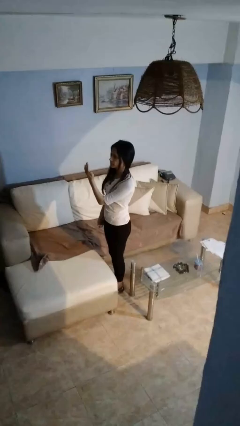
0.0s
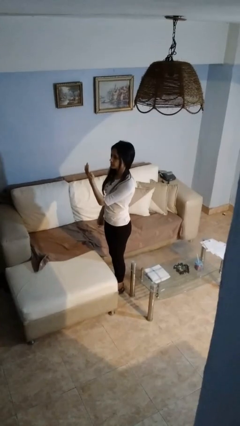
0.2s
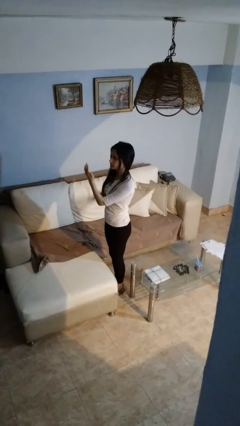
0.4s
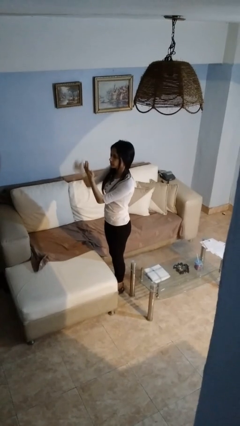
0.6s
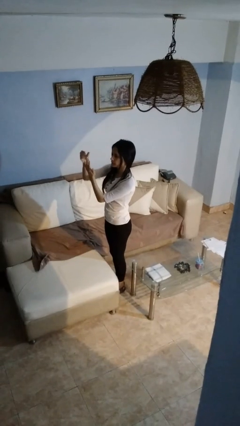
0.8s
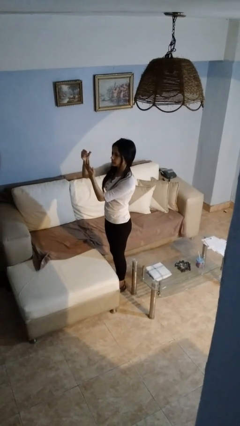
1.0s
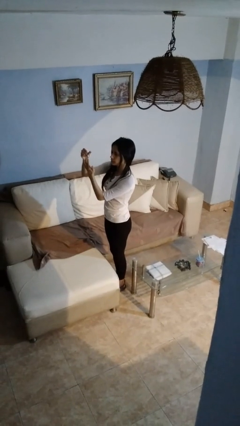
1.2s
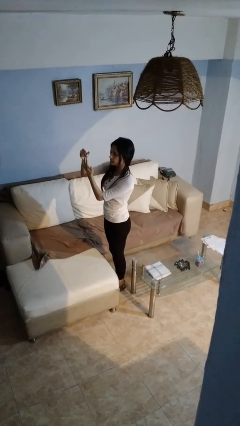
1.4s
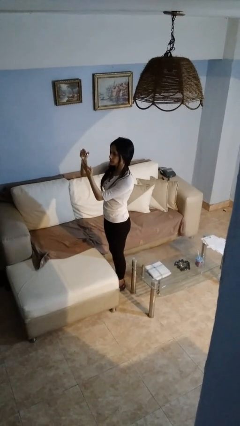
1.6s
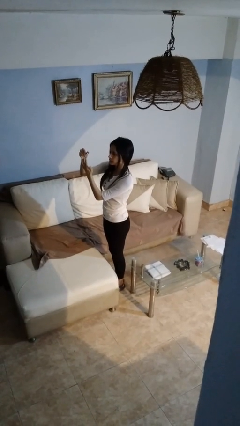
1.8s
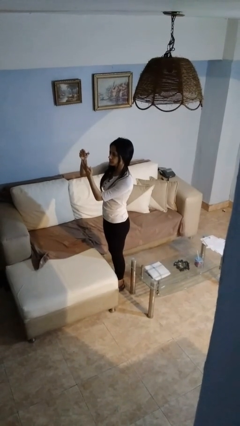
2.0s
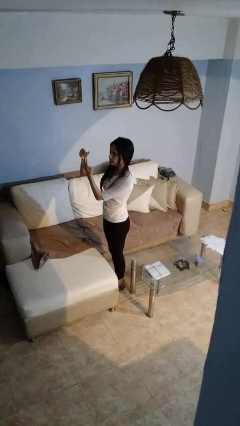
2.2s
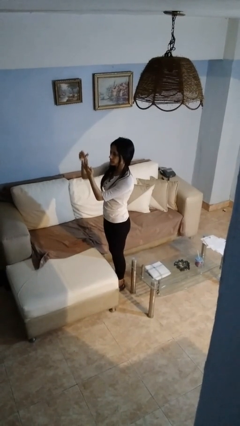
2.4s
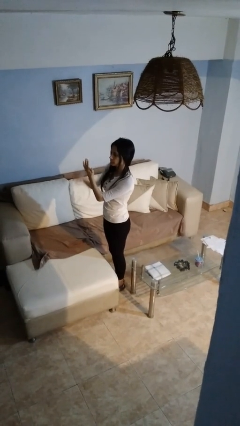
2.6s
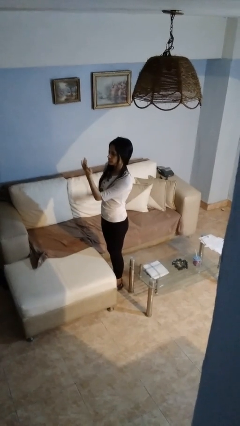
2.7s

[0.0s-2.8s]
person clips fingernails

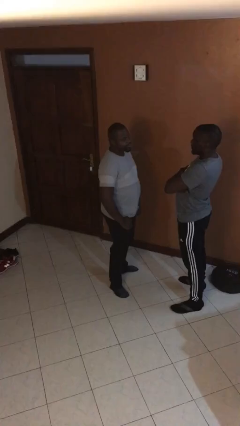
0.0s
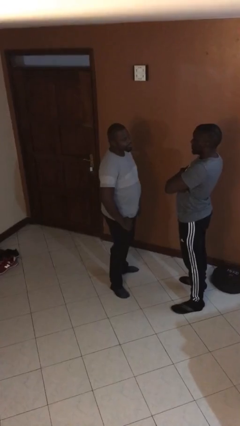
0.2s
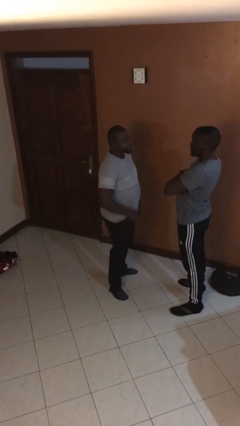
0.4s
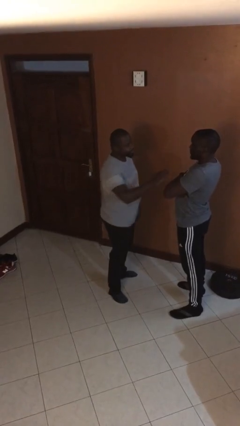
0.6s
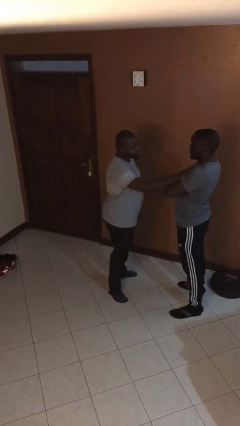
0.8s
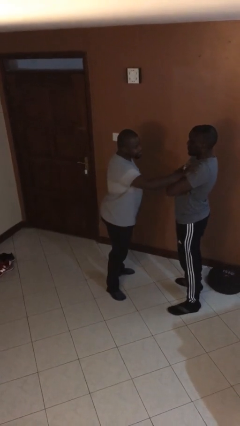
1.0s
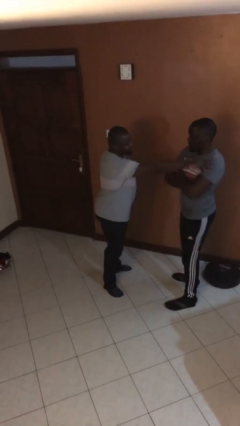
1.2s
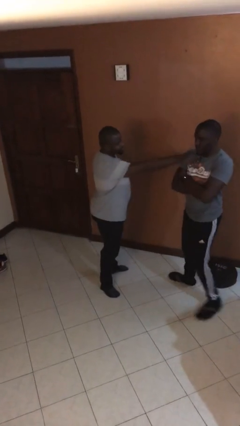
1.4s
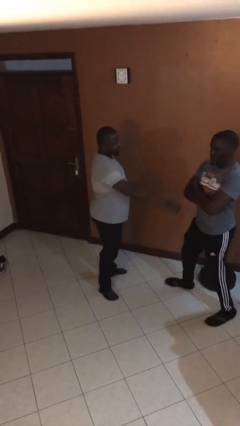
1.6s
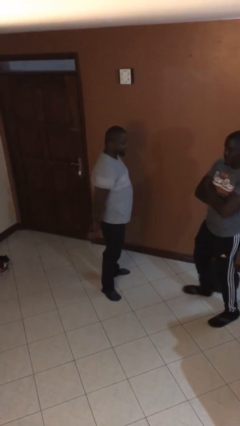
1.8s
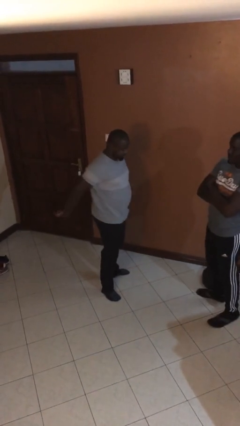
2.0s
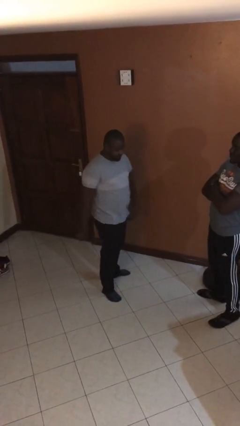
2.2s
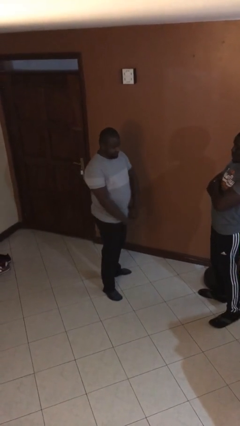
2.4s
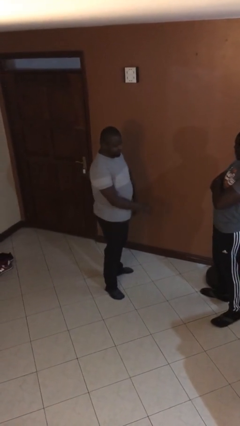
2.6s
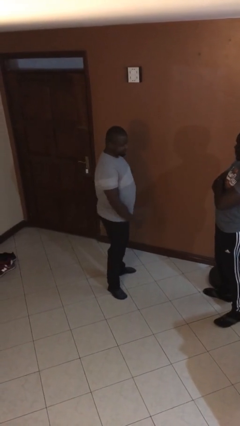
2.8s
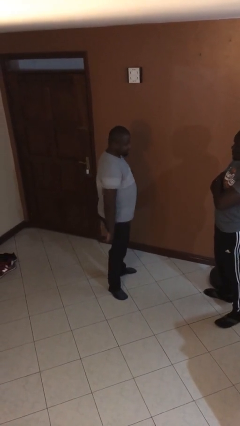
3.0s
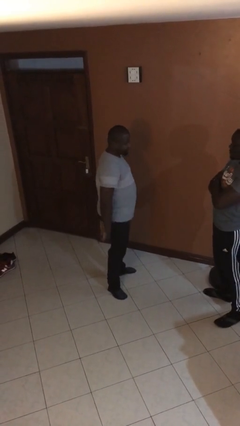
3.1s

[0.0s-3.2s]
person shoves person

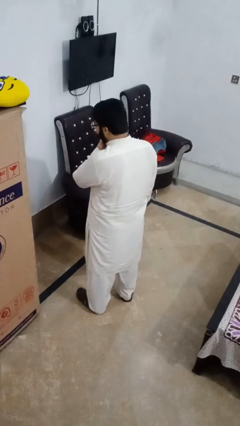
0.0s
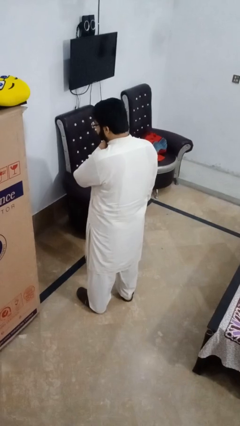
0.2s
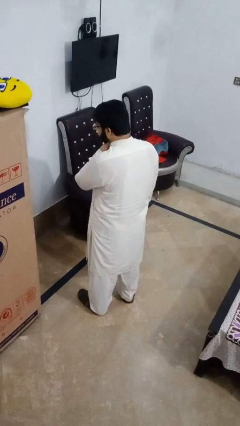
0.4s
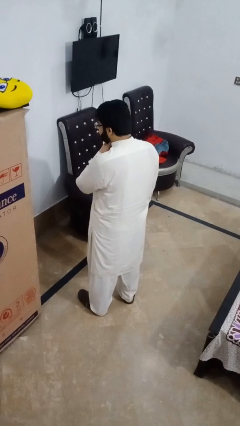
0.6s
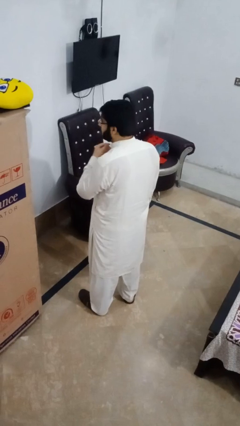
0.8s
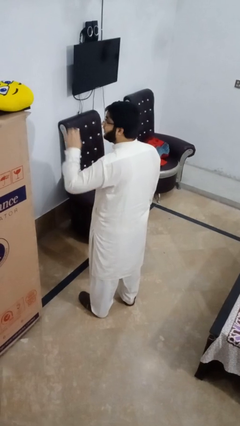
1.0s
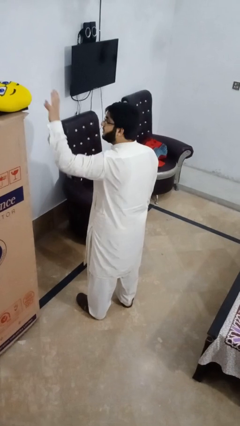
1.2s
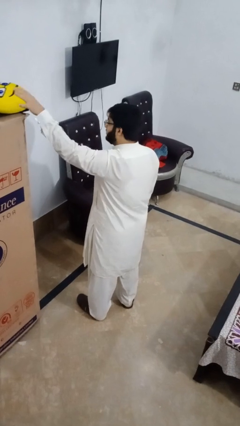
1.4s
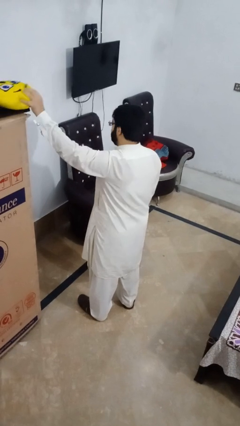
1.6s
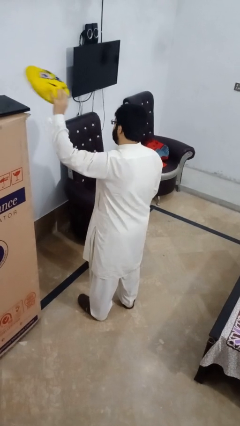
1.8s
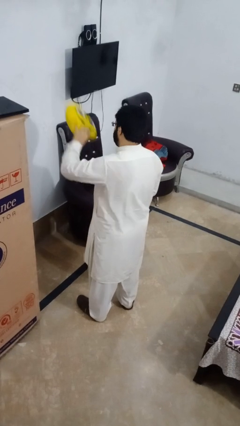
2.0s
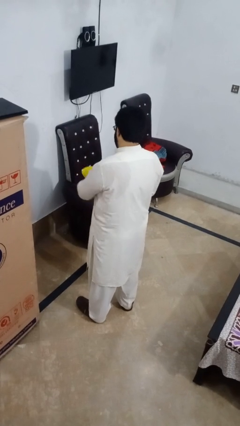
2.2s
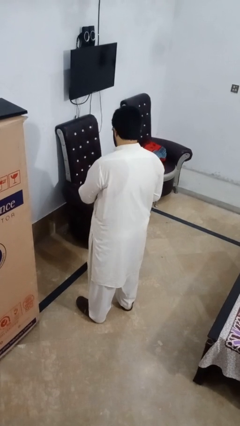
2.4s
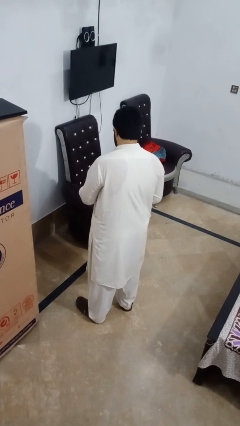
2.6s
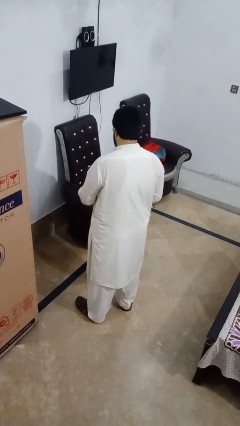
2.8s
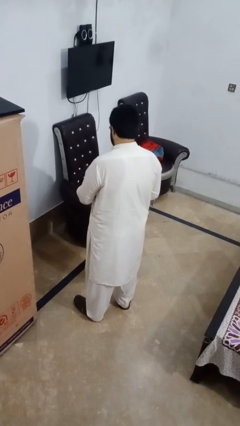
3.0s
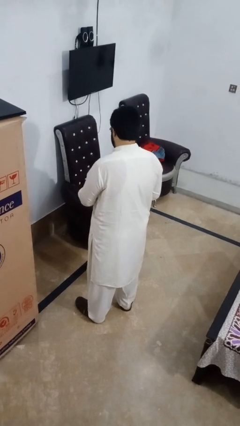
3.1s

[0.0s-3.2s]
person picks up object from shelf

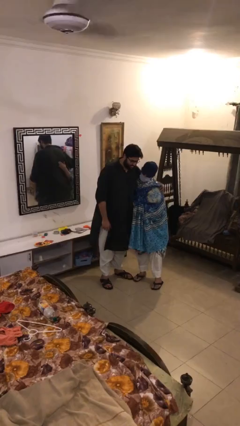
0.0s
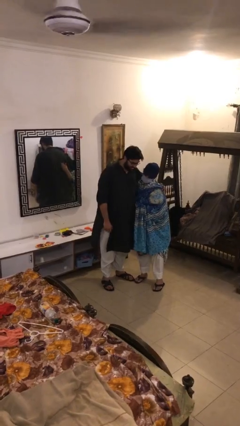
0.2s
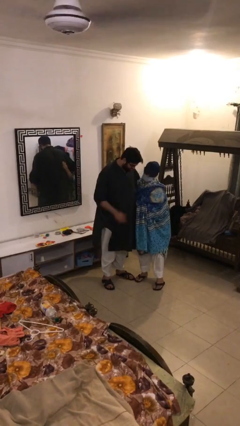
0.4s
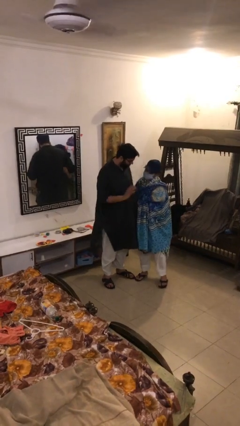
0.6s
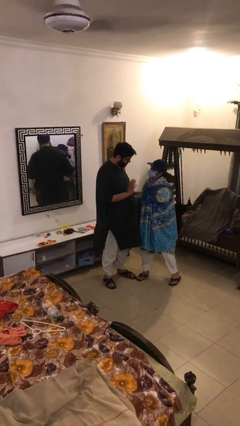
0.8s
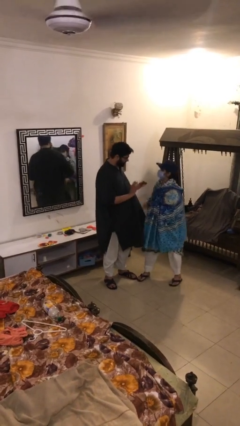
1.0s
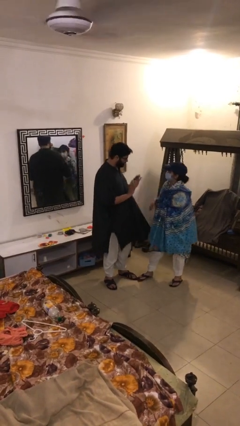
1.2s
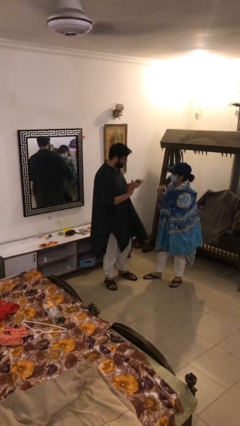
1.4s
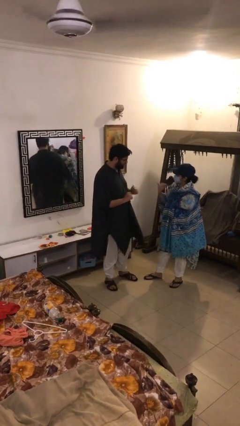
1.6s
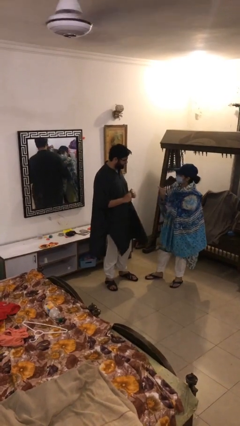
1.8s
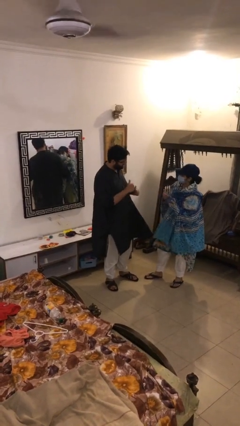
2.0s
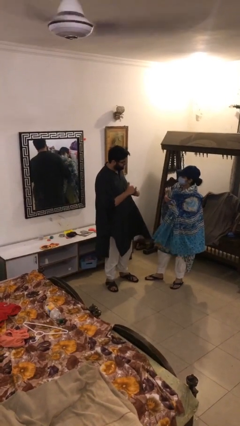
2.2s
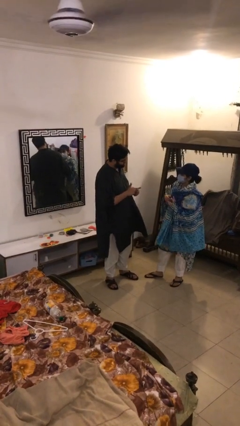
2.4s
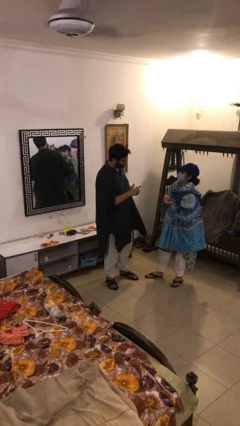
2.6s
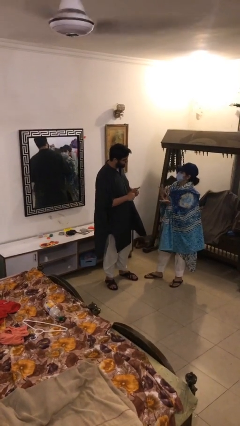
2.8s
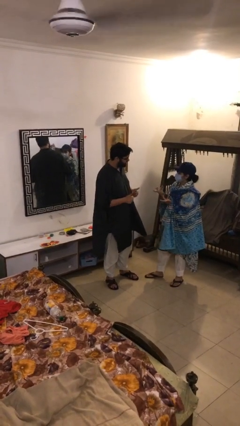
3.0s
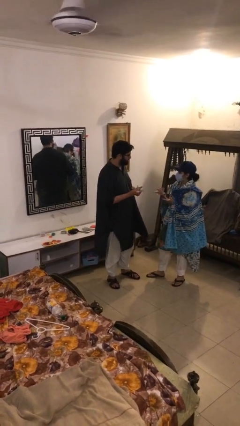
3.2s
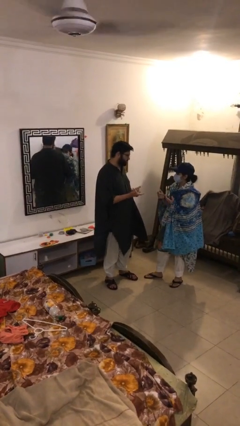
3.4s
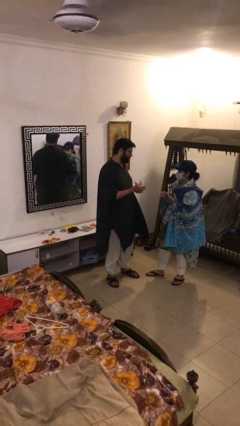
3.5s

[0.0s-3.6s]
person talks to person

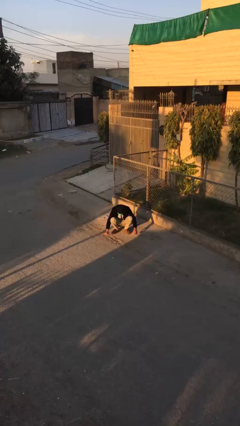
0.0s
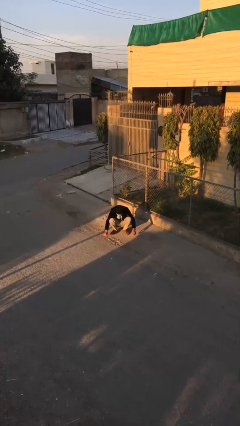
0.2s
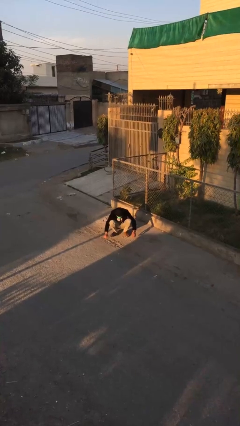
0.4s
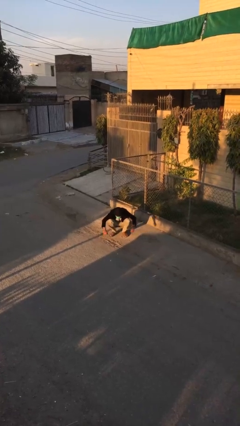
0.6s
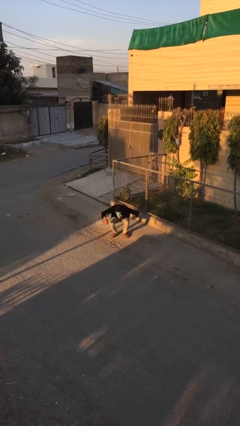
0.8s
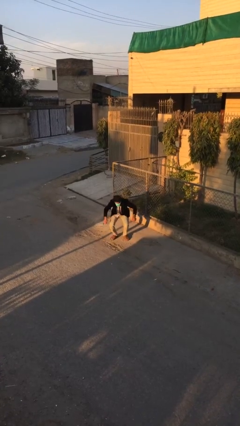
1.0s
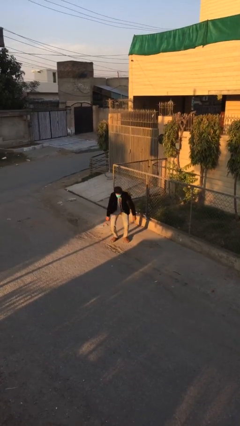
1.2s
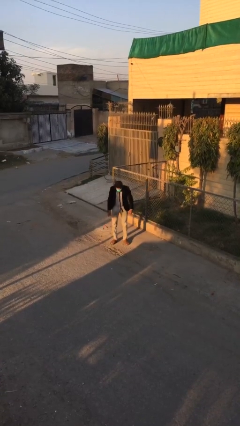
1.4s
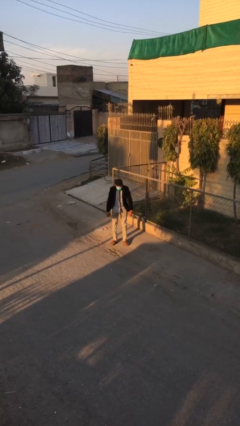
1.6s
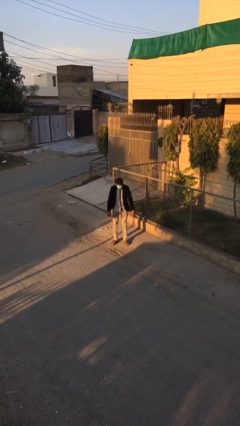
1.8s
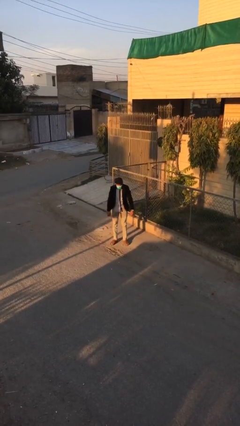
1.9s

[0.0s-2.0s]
person stands up

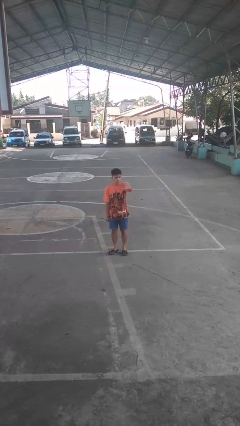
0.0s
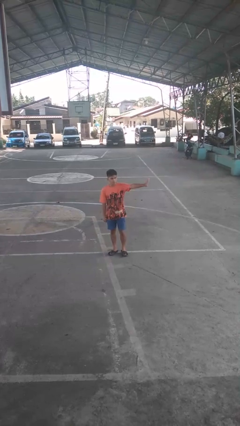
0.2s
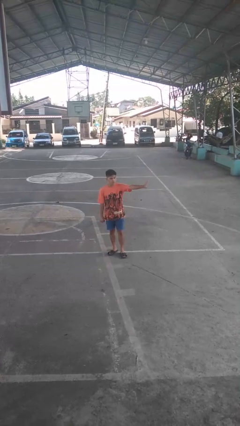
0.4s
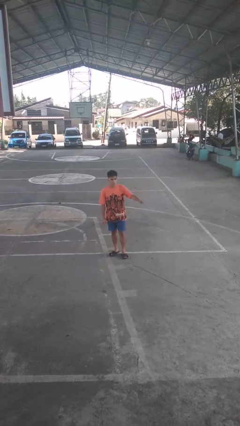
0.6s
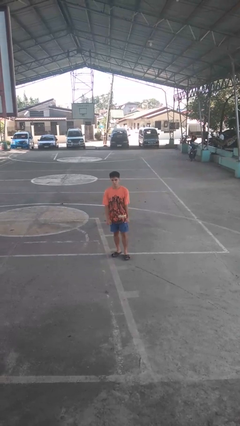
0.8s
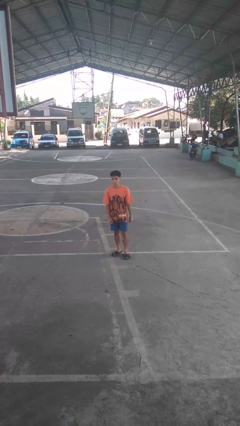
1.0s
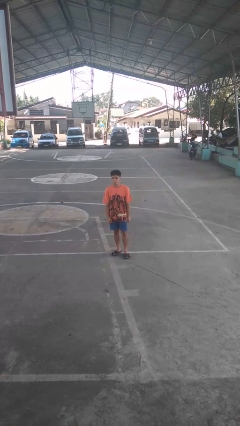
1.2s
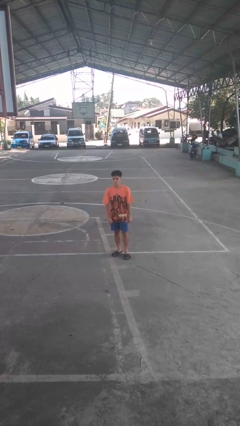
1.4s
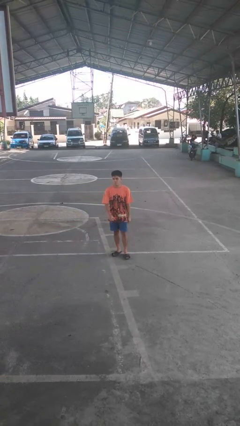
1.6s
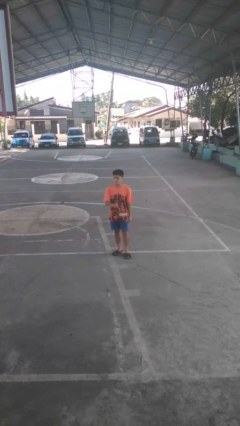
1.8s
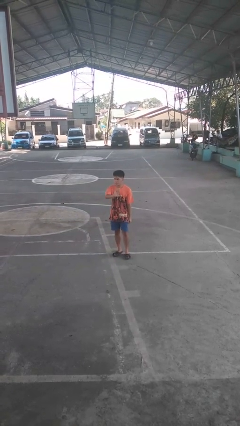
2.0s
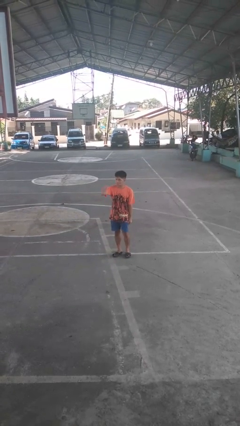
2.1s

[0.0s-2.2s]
person gestures swipe left

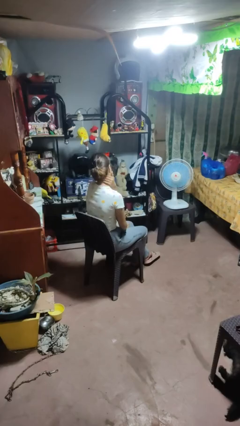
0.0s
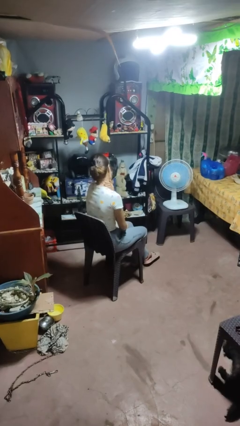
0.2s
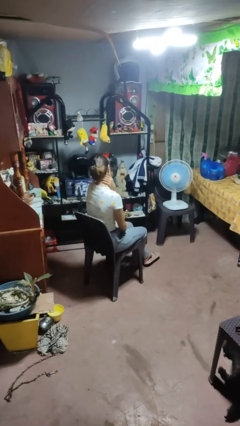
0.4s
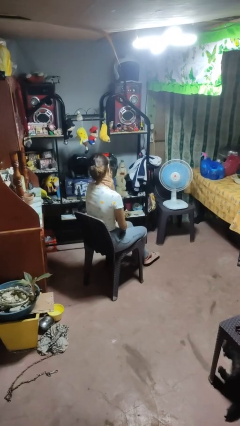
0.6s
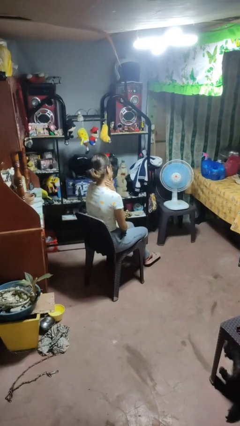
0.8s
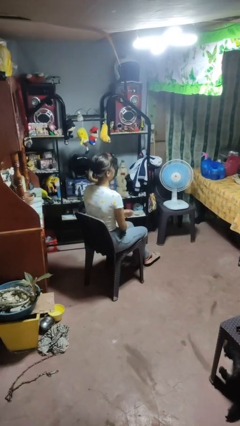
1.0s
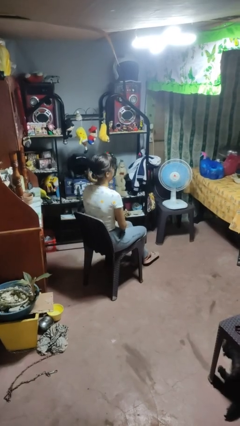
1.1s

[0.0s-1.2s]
person rubs neck
